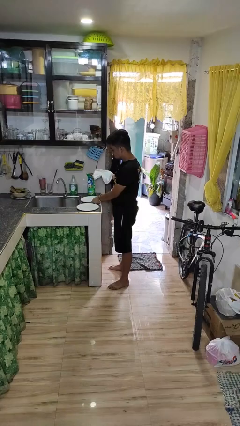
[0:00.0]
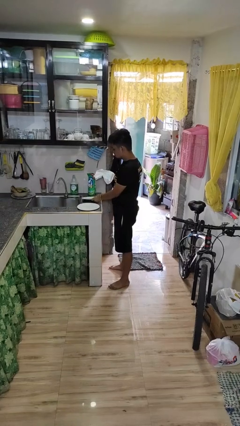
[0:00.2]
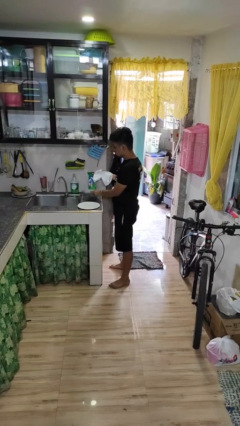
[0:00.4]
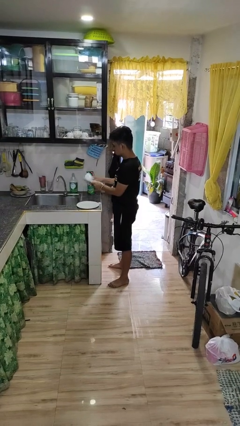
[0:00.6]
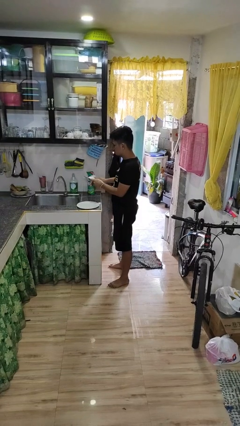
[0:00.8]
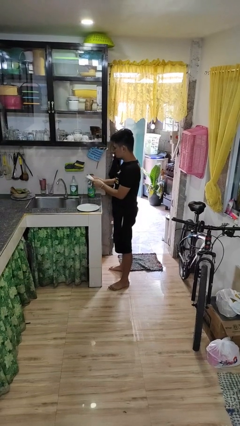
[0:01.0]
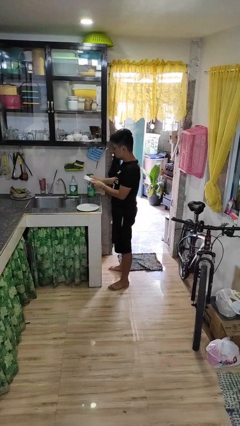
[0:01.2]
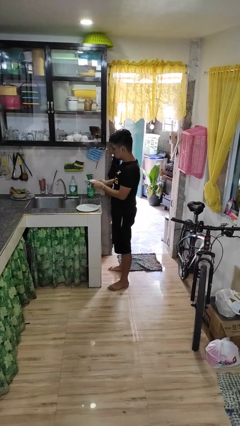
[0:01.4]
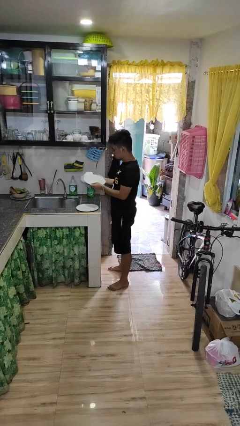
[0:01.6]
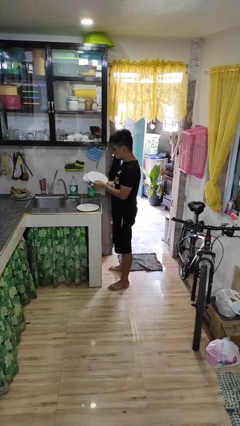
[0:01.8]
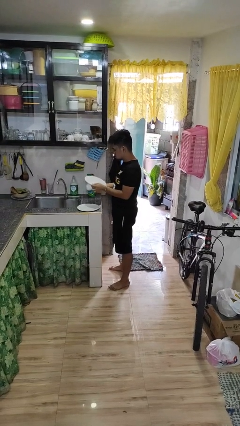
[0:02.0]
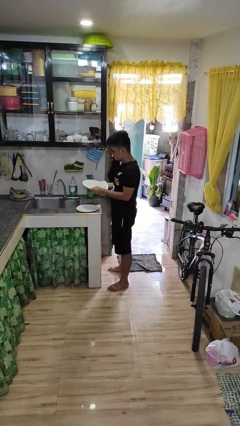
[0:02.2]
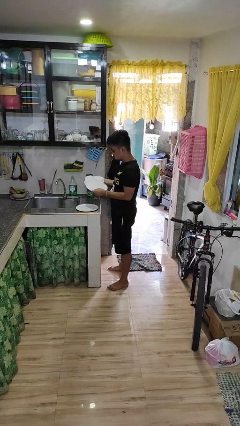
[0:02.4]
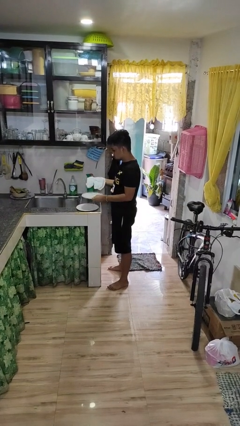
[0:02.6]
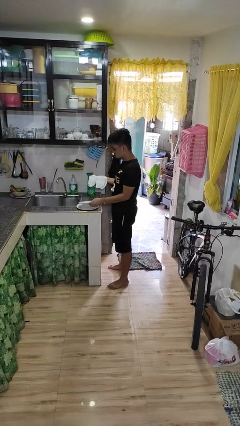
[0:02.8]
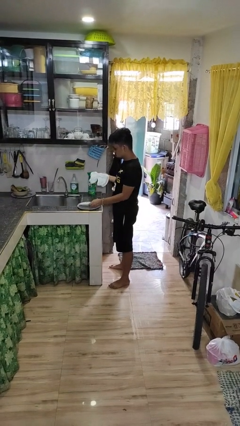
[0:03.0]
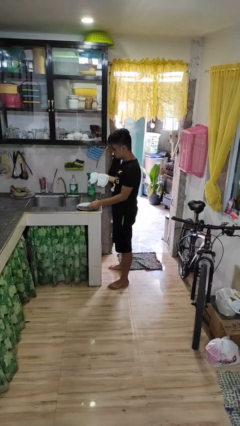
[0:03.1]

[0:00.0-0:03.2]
person dries dish

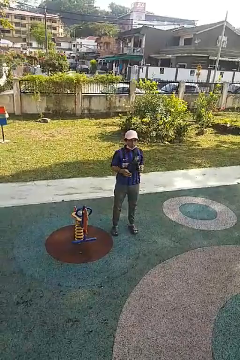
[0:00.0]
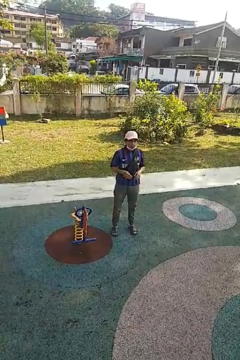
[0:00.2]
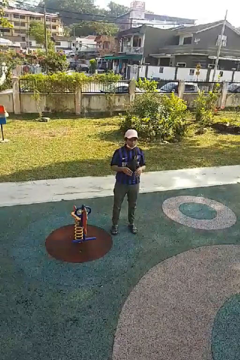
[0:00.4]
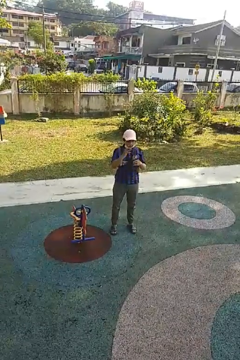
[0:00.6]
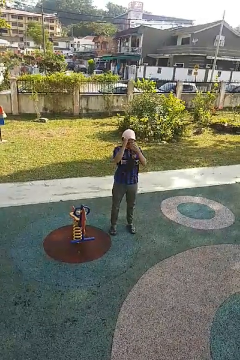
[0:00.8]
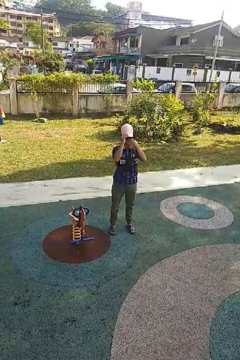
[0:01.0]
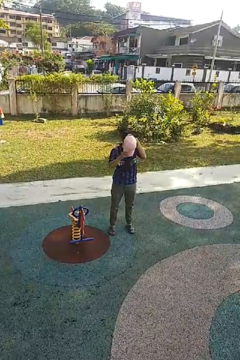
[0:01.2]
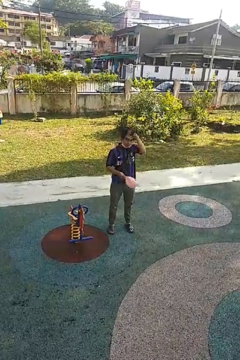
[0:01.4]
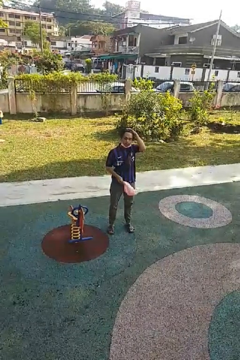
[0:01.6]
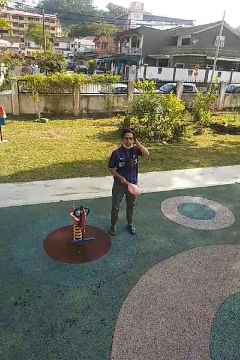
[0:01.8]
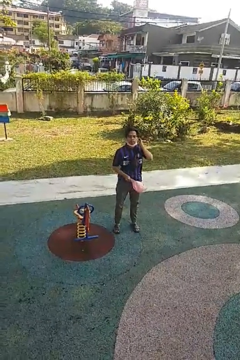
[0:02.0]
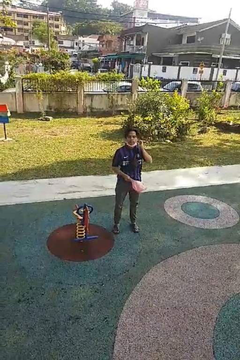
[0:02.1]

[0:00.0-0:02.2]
person takes off hat

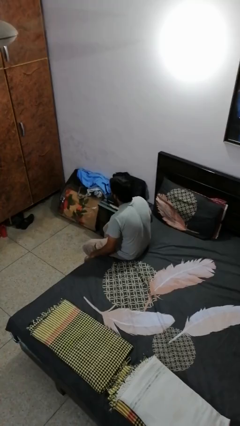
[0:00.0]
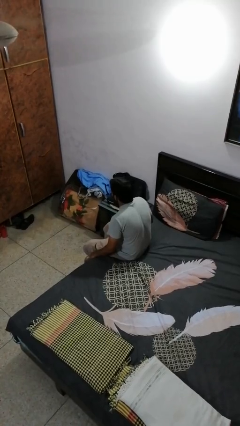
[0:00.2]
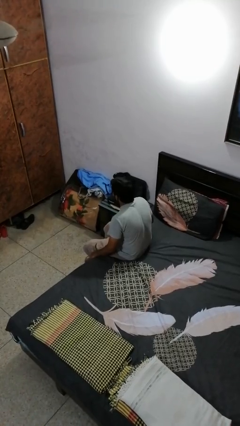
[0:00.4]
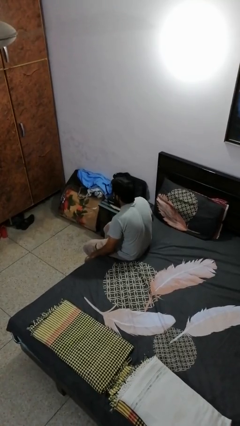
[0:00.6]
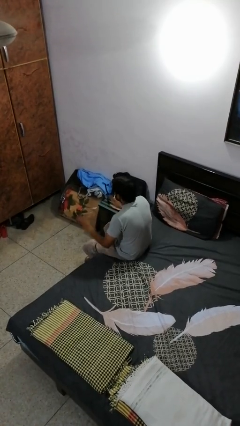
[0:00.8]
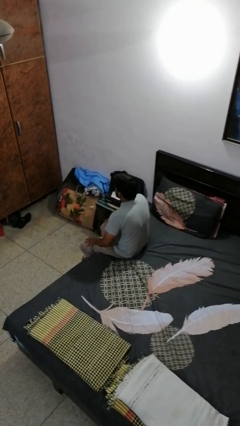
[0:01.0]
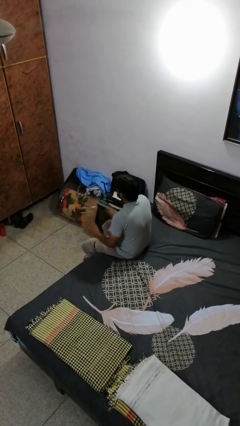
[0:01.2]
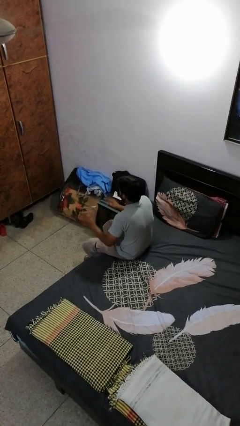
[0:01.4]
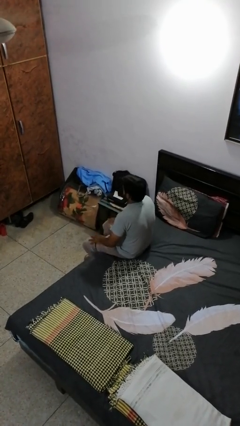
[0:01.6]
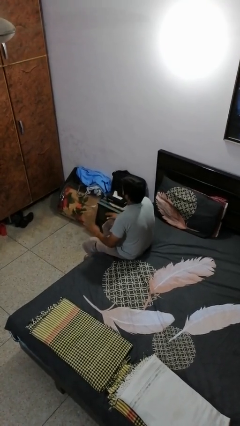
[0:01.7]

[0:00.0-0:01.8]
person slaps hands on thighs

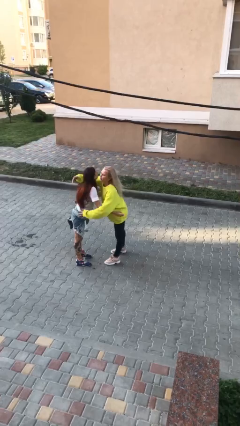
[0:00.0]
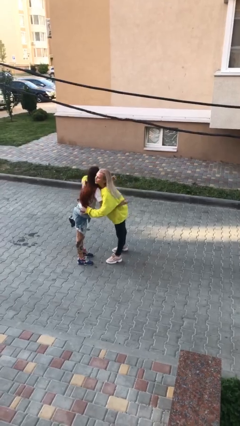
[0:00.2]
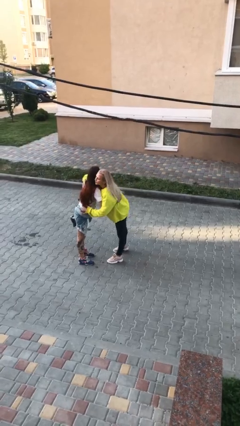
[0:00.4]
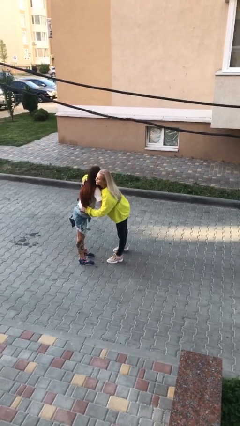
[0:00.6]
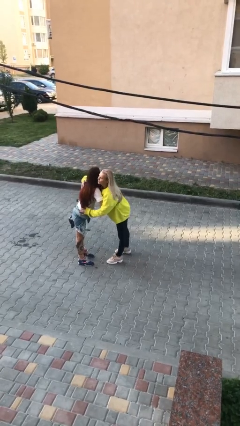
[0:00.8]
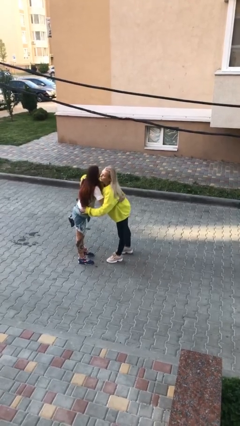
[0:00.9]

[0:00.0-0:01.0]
person embraces person

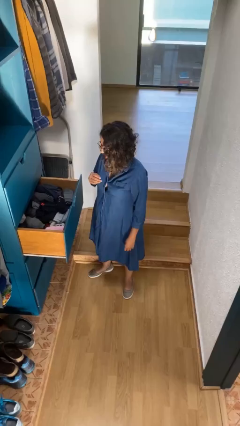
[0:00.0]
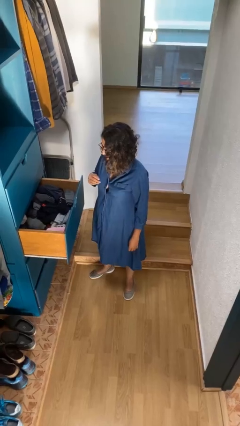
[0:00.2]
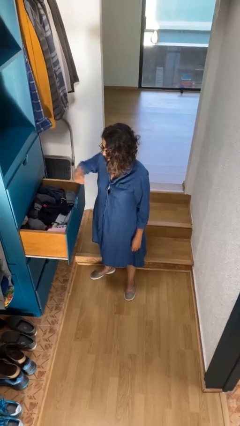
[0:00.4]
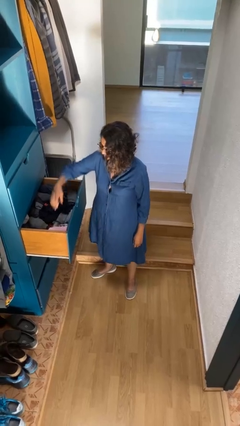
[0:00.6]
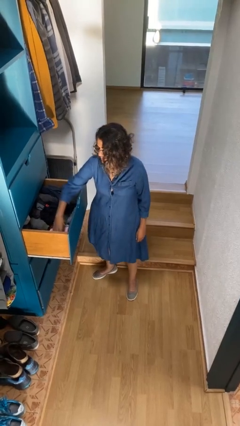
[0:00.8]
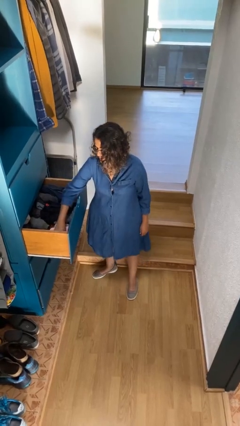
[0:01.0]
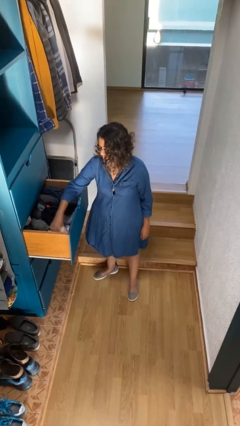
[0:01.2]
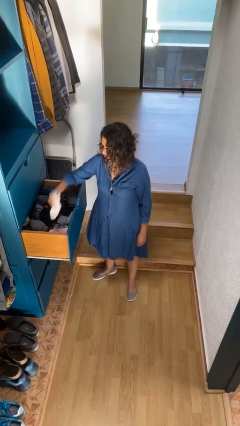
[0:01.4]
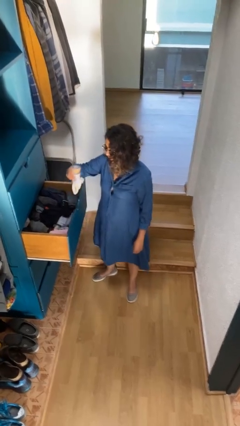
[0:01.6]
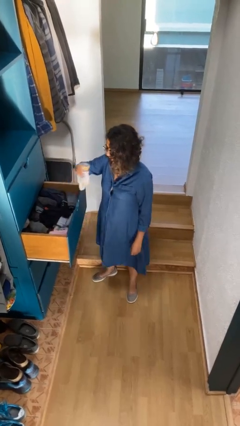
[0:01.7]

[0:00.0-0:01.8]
person takes clothes from dresser

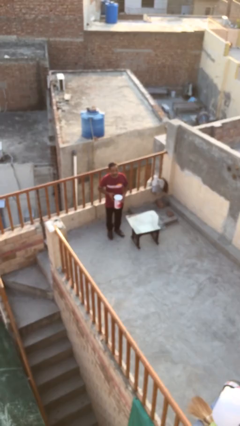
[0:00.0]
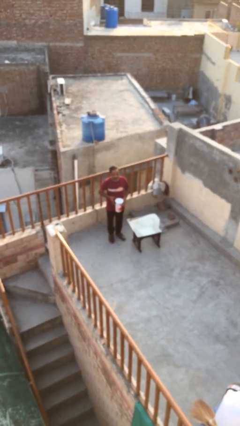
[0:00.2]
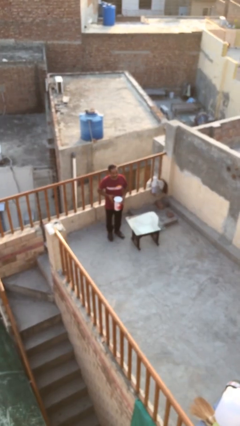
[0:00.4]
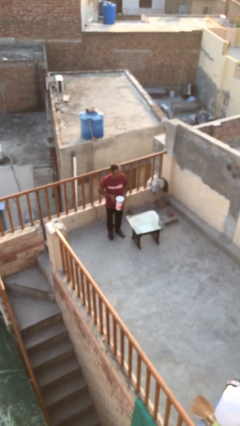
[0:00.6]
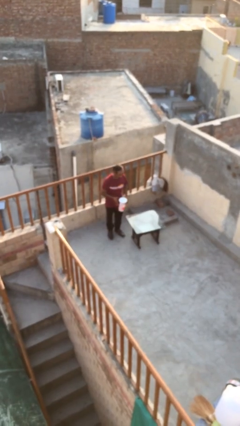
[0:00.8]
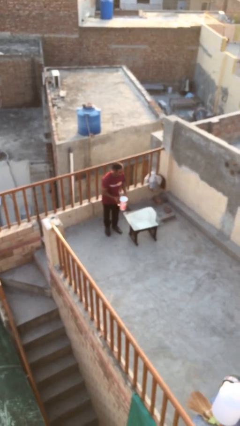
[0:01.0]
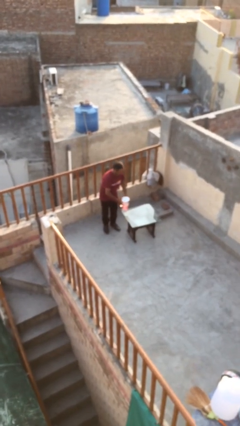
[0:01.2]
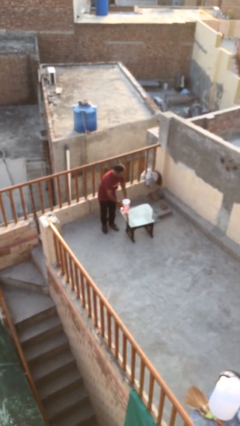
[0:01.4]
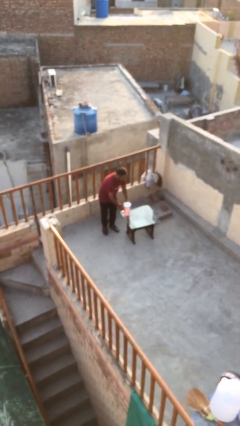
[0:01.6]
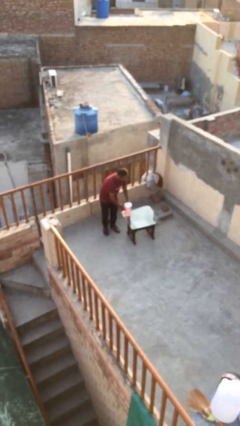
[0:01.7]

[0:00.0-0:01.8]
person puts down object on table

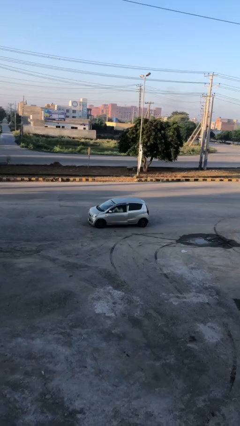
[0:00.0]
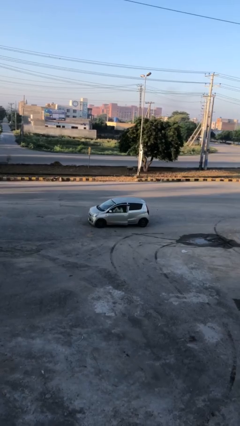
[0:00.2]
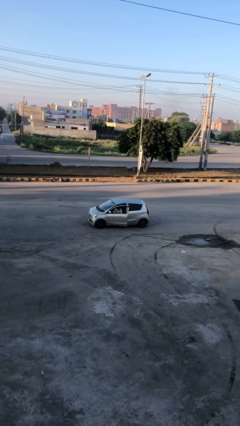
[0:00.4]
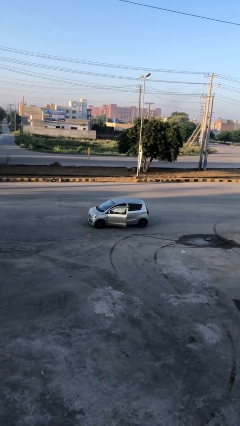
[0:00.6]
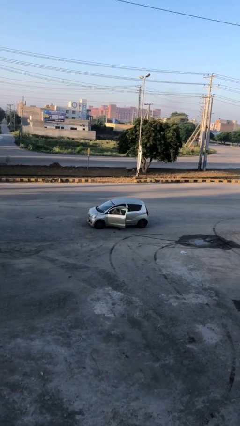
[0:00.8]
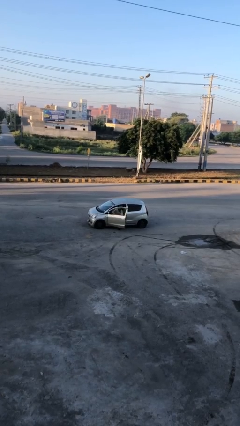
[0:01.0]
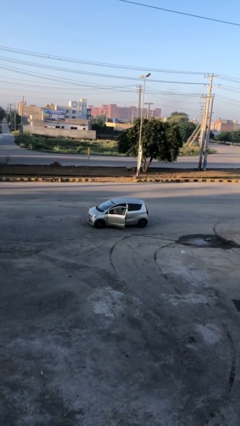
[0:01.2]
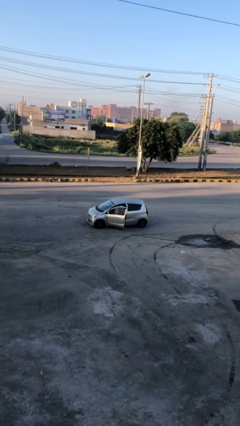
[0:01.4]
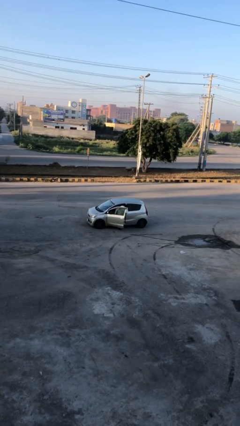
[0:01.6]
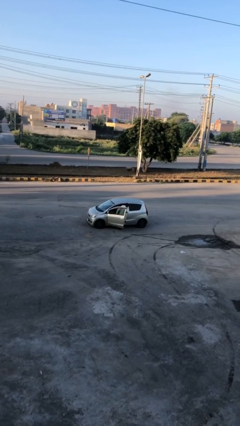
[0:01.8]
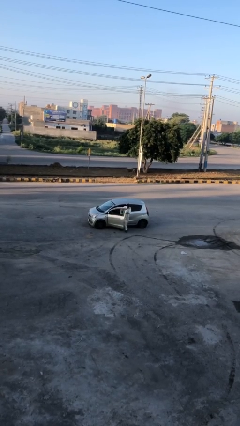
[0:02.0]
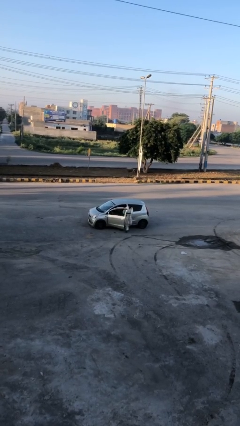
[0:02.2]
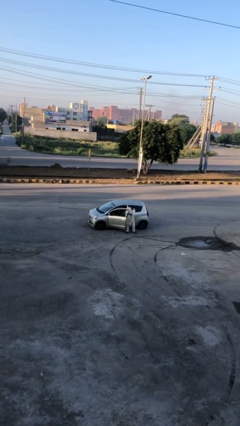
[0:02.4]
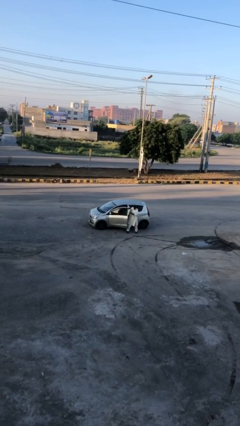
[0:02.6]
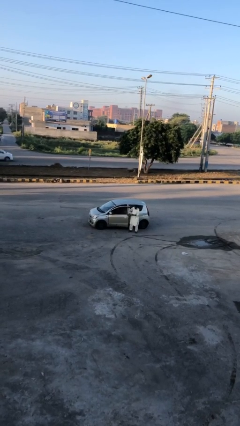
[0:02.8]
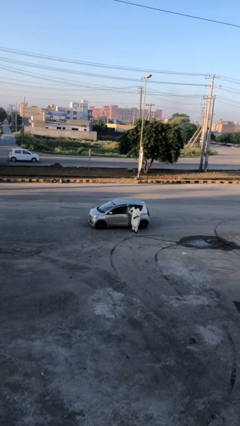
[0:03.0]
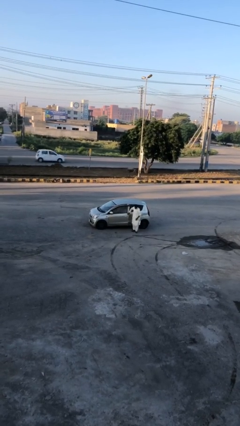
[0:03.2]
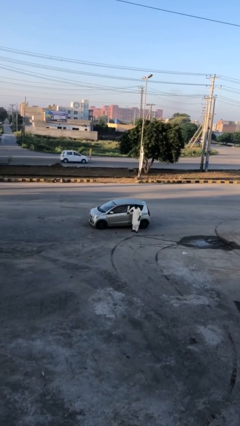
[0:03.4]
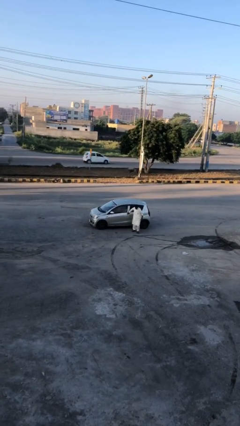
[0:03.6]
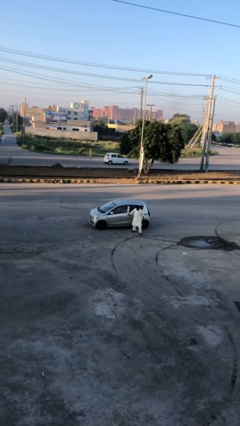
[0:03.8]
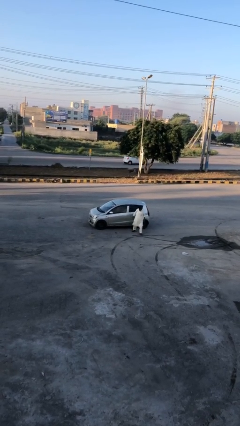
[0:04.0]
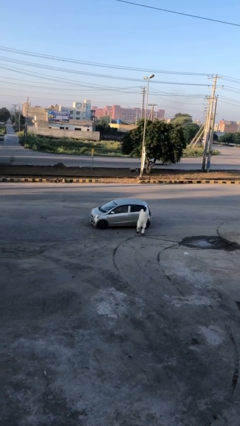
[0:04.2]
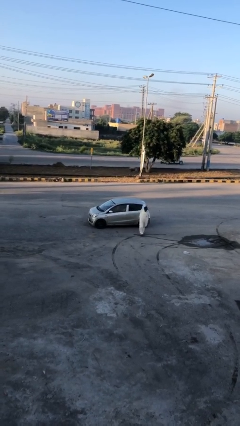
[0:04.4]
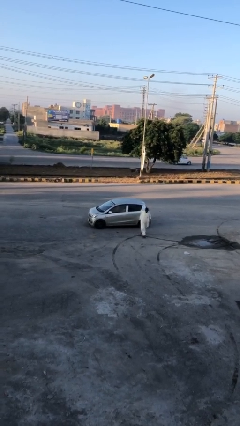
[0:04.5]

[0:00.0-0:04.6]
car drops off person

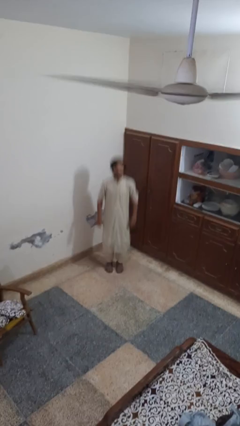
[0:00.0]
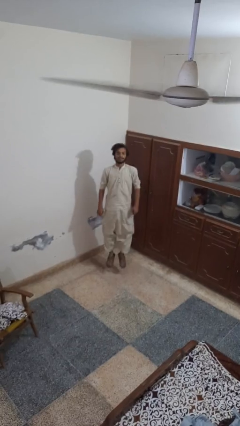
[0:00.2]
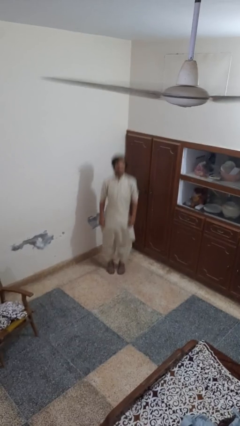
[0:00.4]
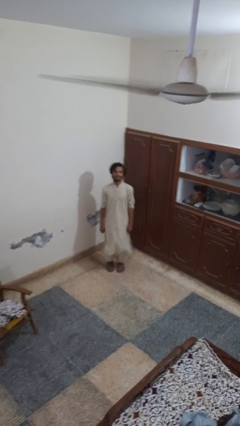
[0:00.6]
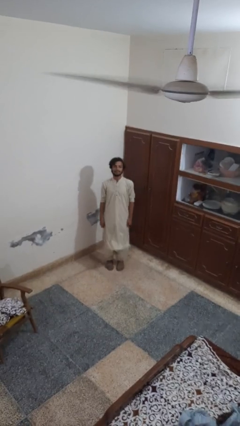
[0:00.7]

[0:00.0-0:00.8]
person jumps
